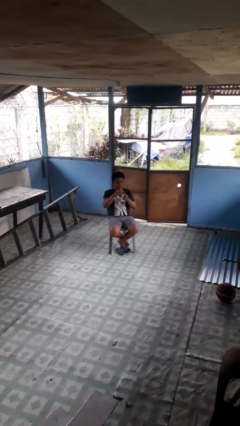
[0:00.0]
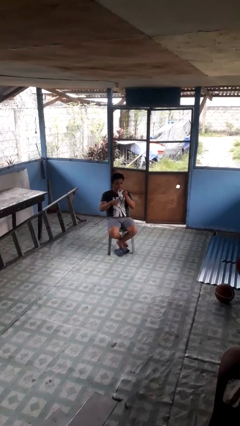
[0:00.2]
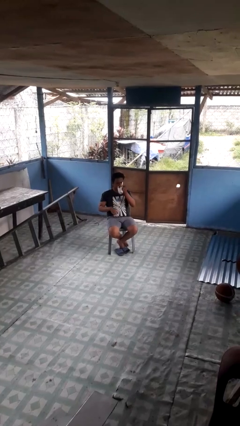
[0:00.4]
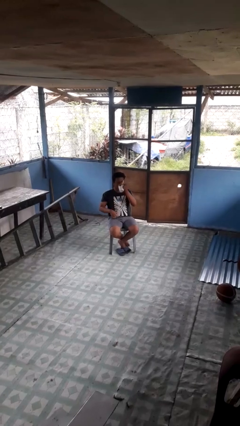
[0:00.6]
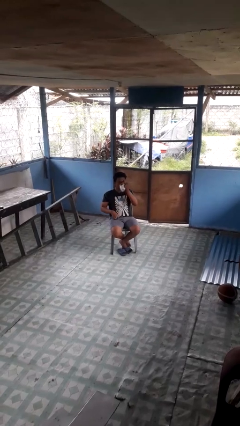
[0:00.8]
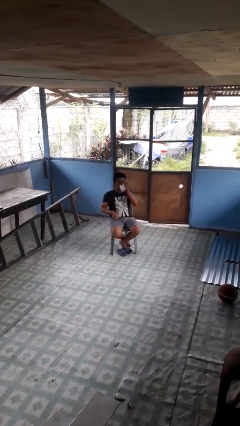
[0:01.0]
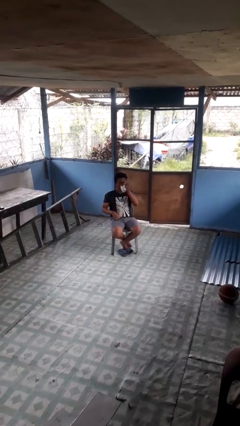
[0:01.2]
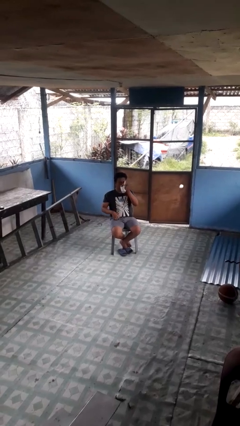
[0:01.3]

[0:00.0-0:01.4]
person drinks from mug

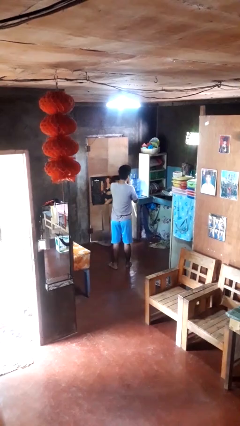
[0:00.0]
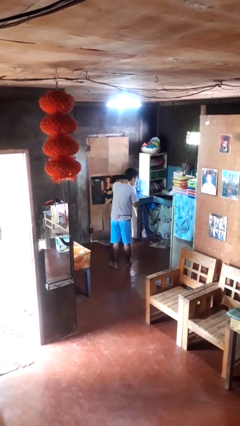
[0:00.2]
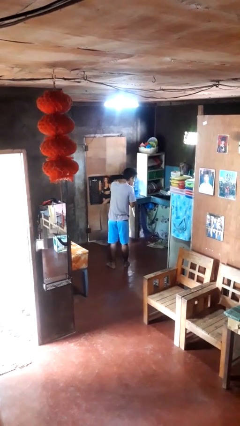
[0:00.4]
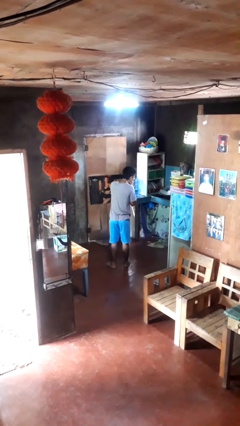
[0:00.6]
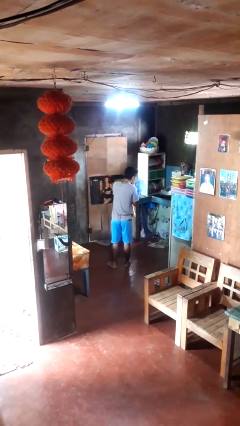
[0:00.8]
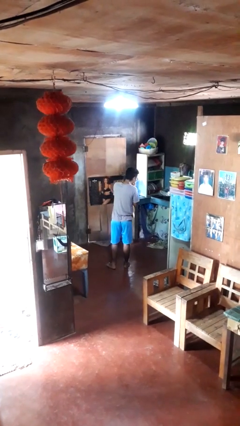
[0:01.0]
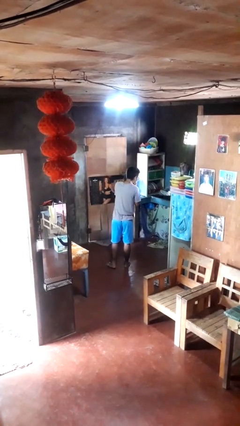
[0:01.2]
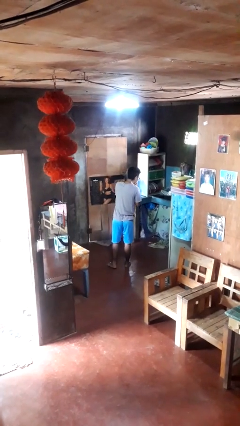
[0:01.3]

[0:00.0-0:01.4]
person sneezes into hand

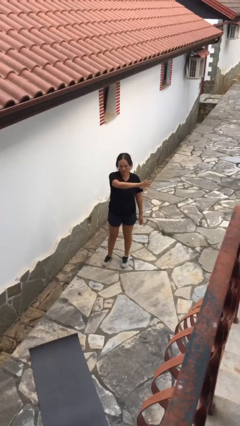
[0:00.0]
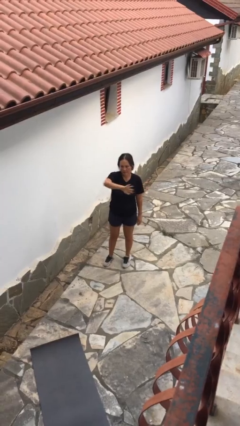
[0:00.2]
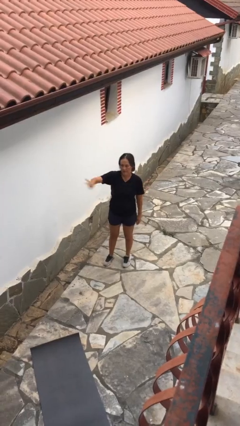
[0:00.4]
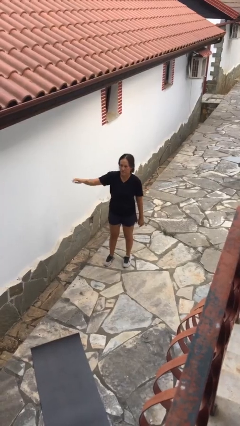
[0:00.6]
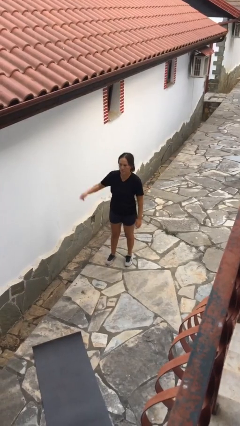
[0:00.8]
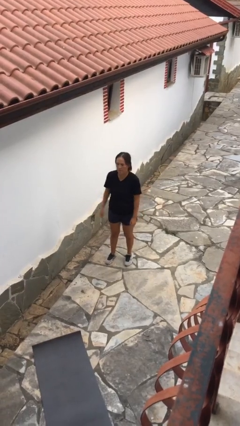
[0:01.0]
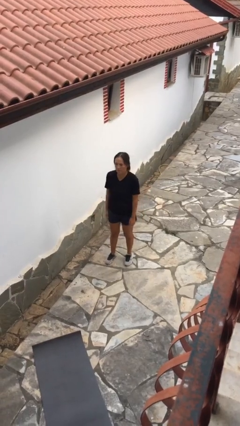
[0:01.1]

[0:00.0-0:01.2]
person gestures swipe right

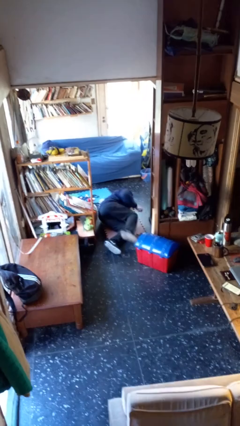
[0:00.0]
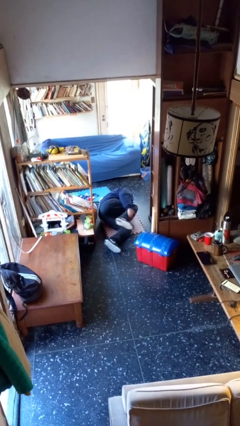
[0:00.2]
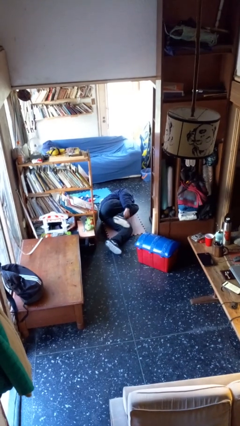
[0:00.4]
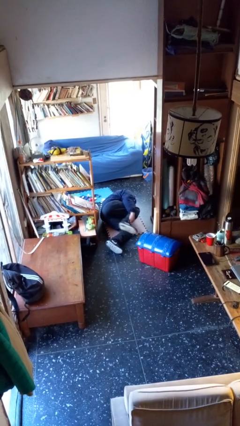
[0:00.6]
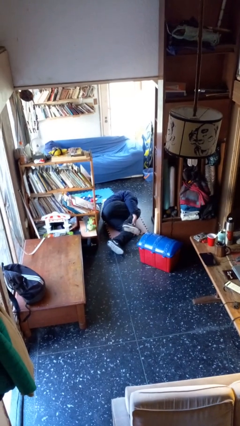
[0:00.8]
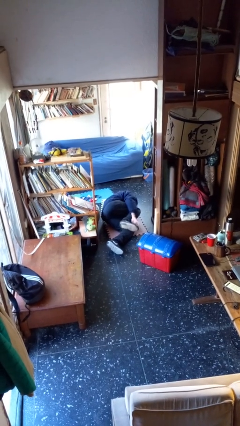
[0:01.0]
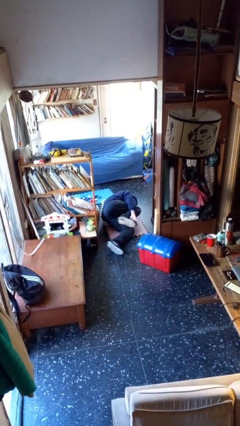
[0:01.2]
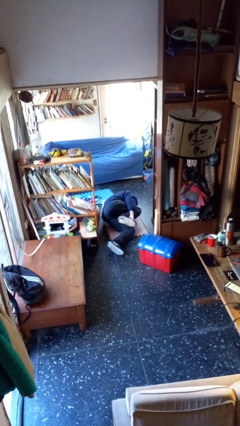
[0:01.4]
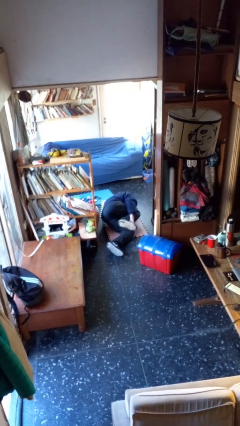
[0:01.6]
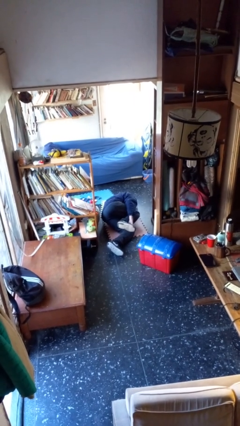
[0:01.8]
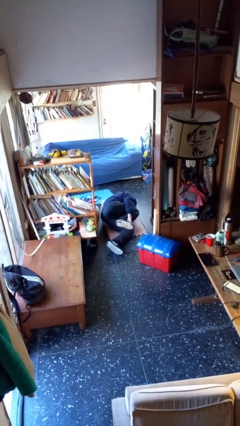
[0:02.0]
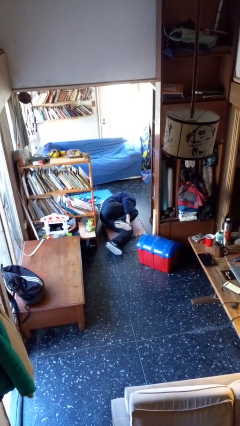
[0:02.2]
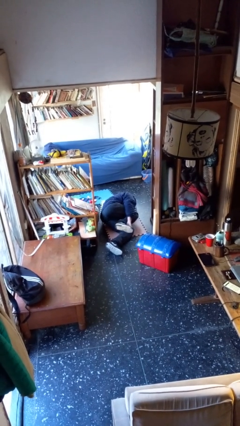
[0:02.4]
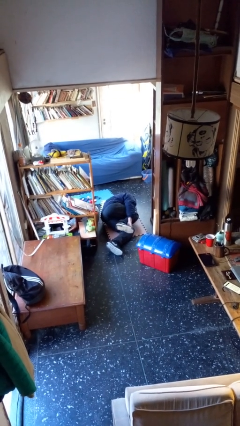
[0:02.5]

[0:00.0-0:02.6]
person lies down on floor

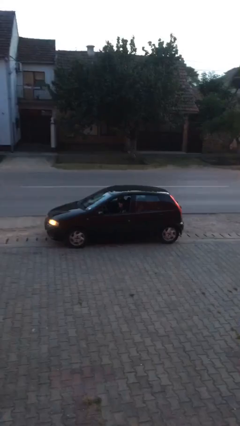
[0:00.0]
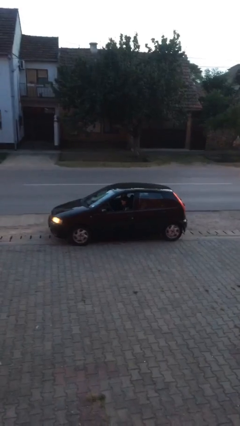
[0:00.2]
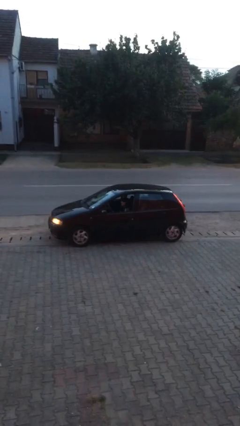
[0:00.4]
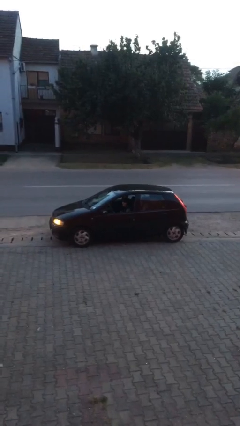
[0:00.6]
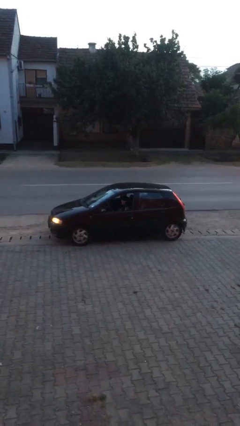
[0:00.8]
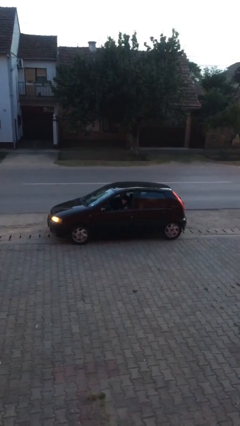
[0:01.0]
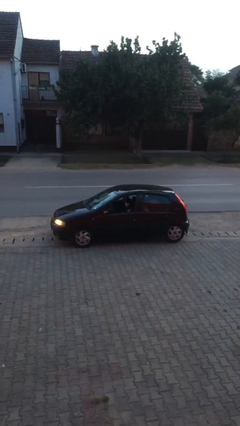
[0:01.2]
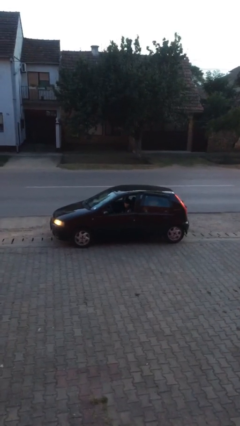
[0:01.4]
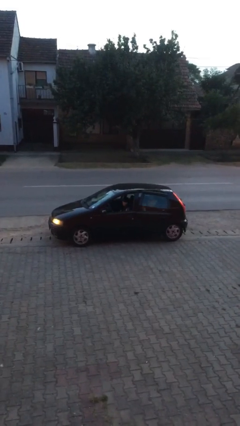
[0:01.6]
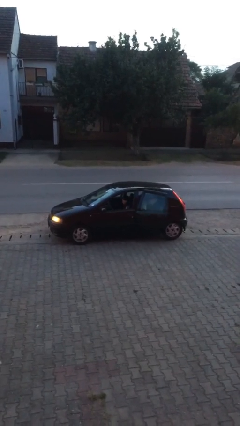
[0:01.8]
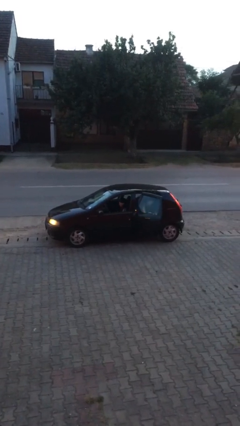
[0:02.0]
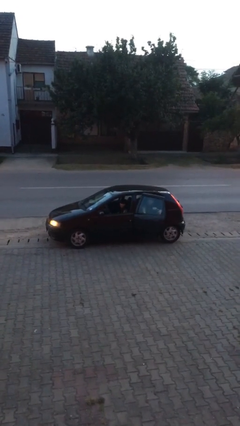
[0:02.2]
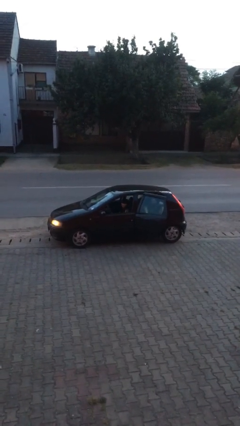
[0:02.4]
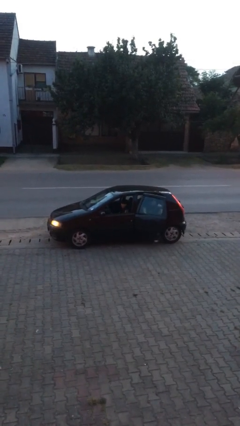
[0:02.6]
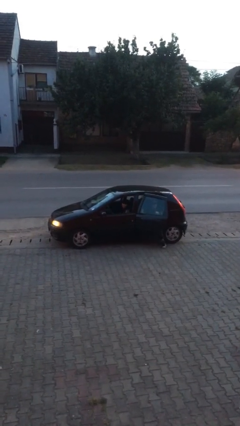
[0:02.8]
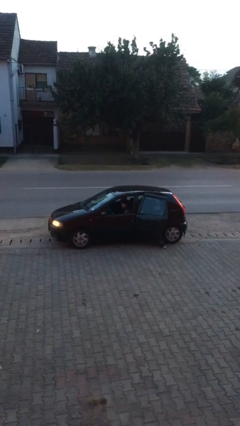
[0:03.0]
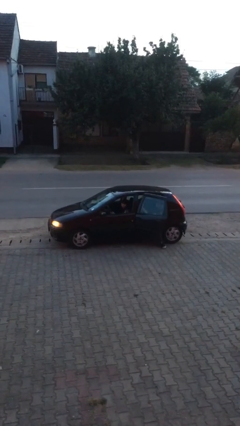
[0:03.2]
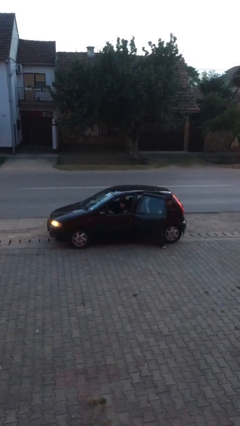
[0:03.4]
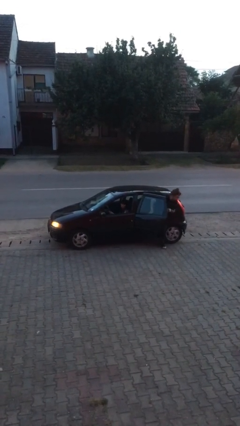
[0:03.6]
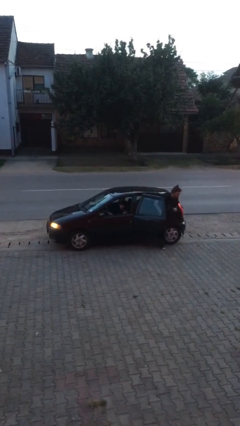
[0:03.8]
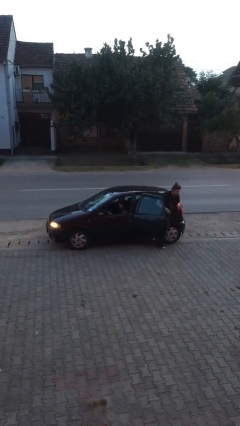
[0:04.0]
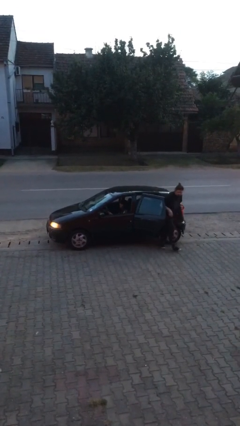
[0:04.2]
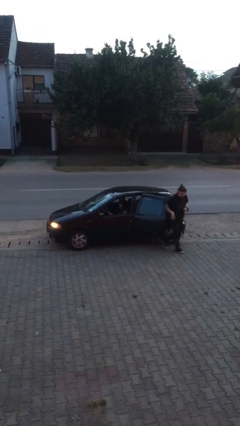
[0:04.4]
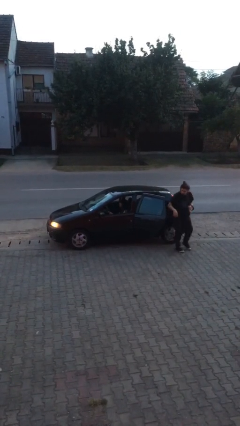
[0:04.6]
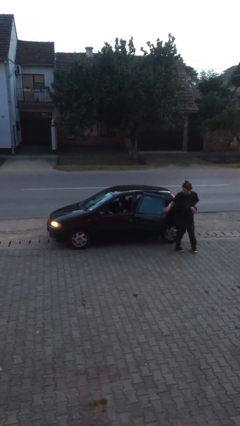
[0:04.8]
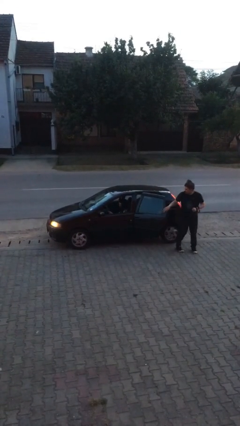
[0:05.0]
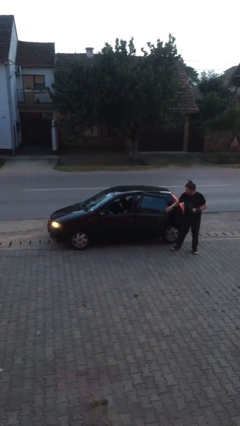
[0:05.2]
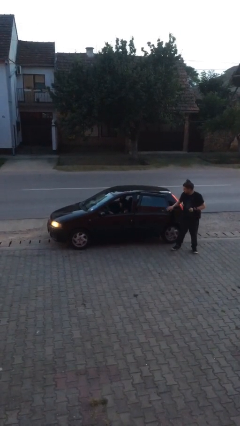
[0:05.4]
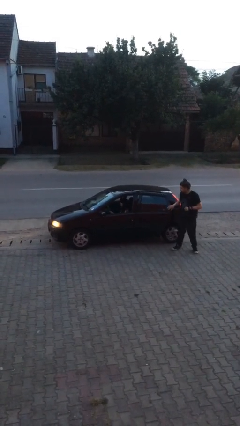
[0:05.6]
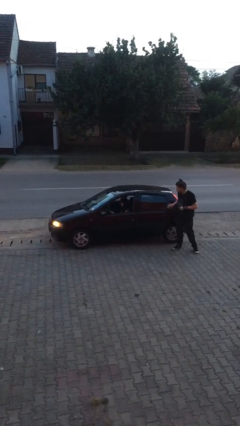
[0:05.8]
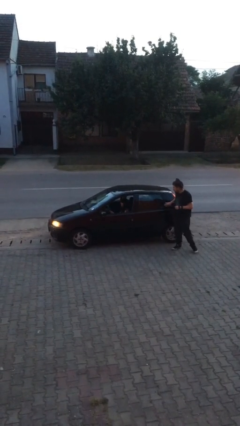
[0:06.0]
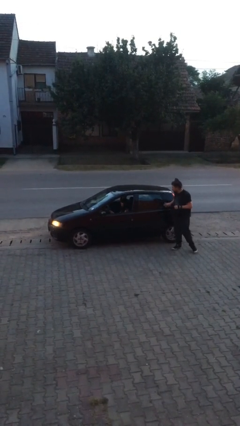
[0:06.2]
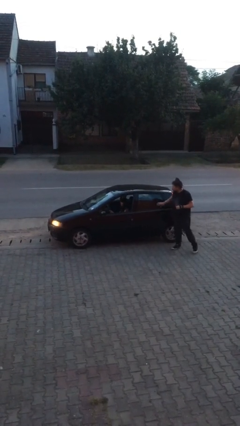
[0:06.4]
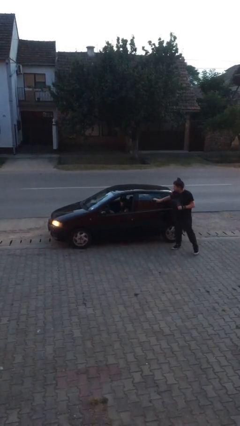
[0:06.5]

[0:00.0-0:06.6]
car drops off person

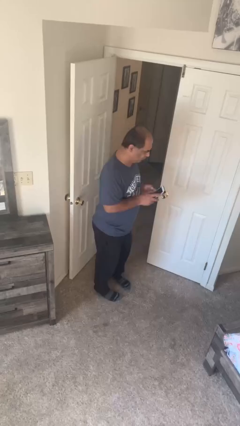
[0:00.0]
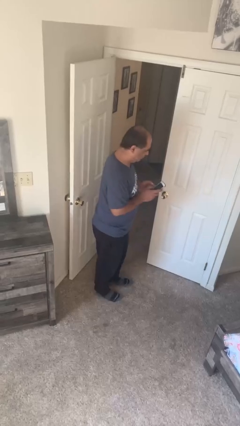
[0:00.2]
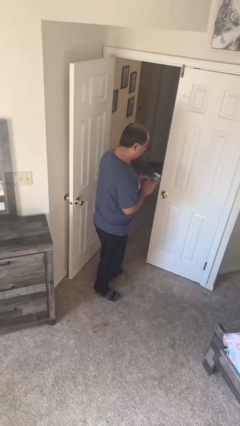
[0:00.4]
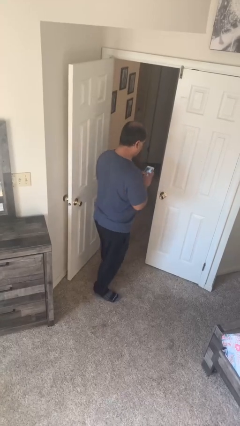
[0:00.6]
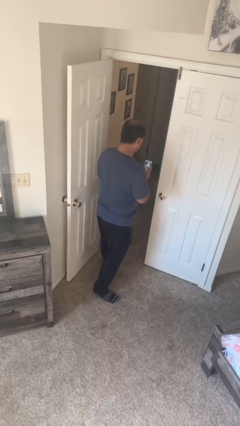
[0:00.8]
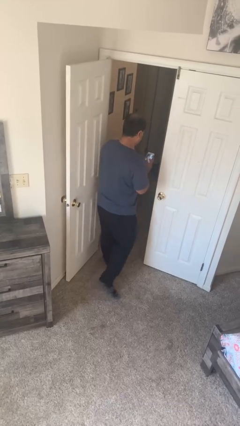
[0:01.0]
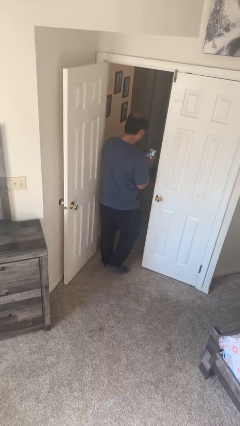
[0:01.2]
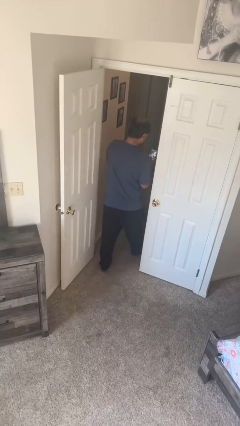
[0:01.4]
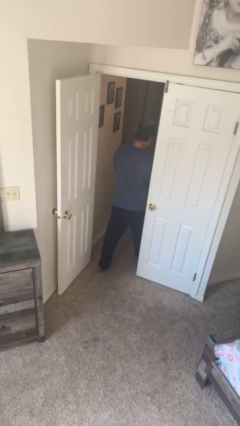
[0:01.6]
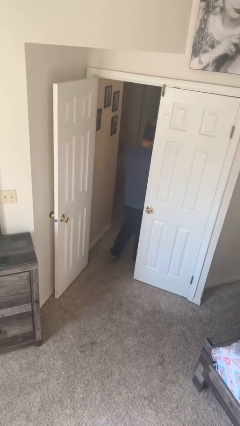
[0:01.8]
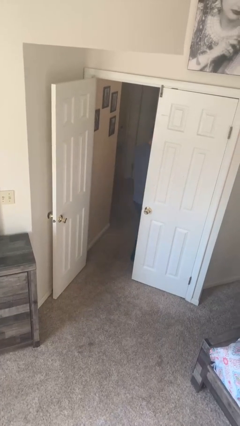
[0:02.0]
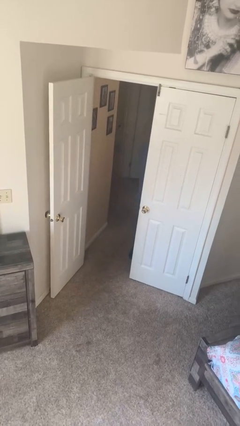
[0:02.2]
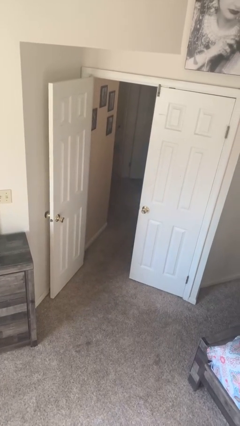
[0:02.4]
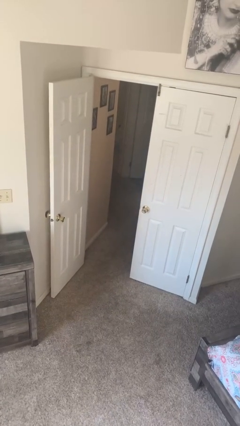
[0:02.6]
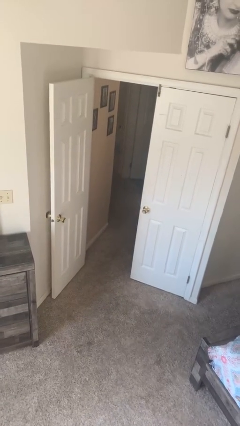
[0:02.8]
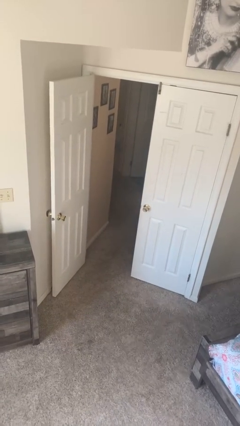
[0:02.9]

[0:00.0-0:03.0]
person exits scene through structure

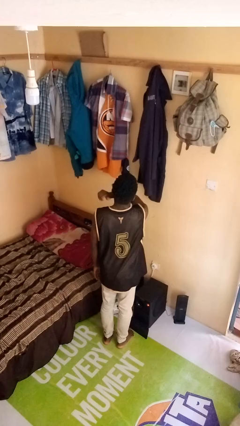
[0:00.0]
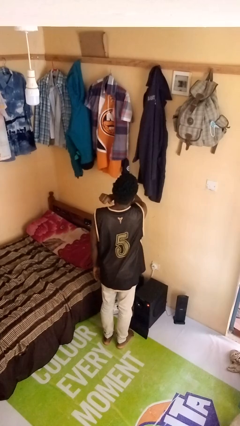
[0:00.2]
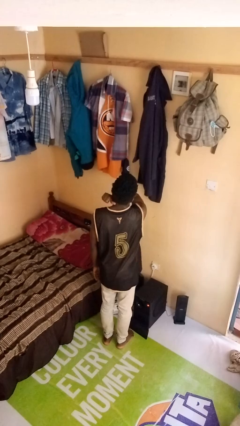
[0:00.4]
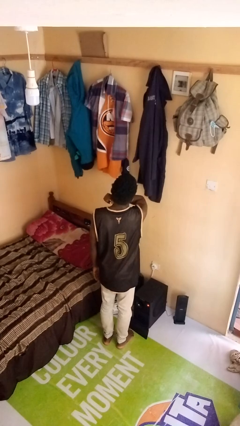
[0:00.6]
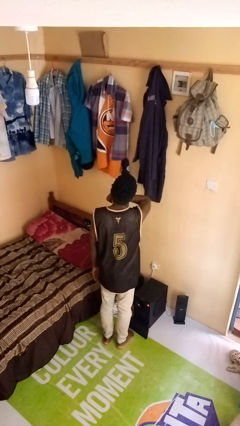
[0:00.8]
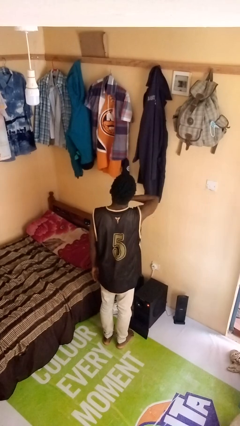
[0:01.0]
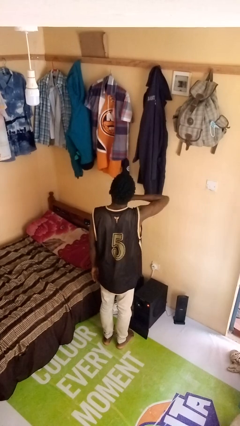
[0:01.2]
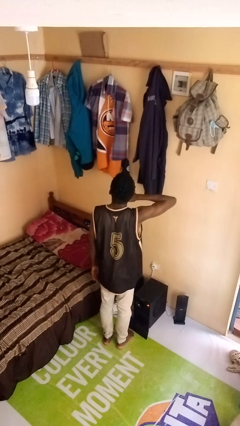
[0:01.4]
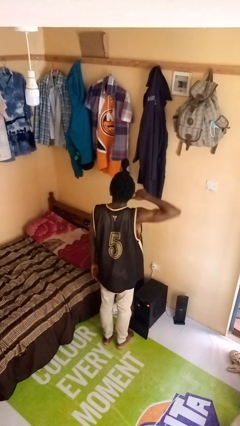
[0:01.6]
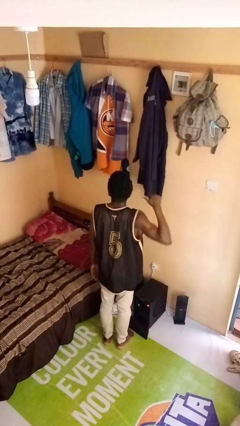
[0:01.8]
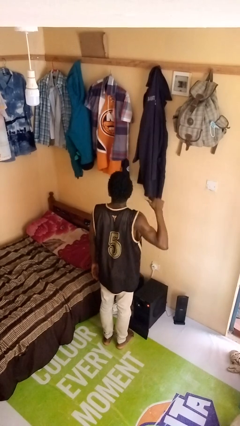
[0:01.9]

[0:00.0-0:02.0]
person gestures cut
